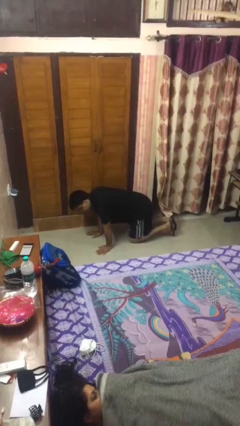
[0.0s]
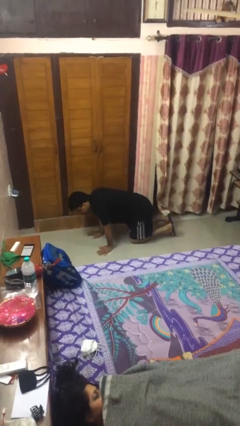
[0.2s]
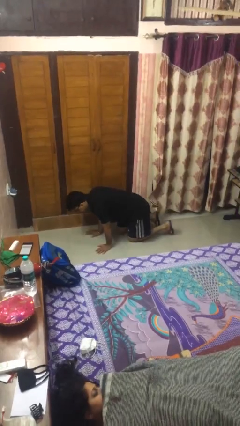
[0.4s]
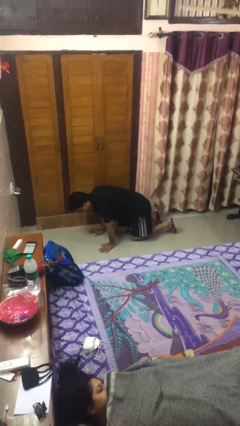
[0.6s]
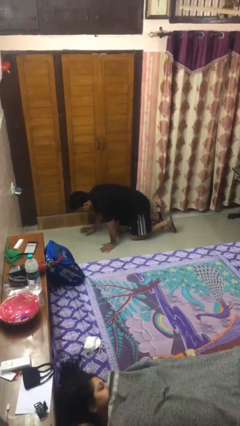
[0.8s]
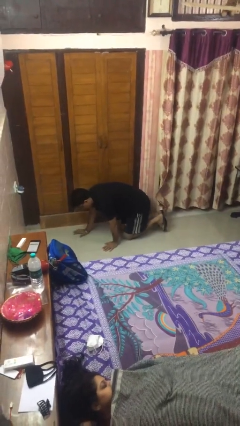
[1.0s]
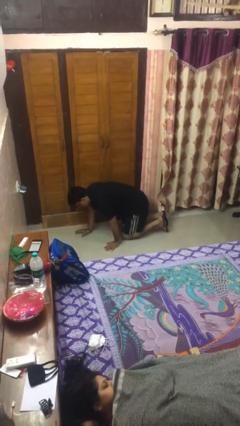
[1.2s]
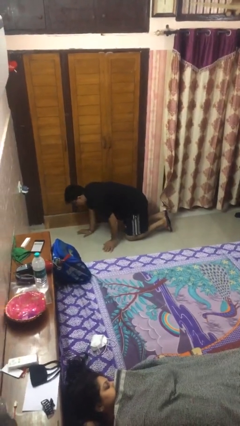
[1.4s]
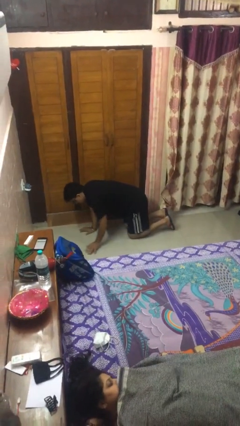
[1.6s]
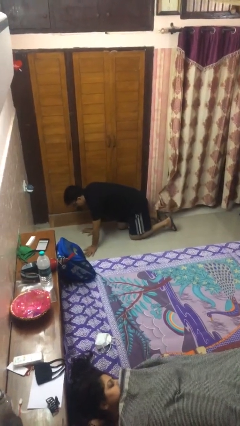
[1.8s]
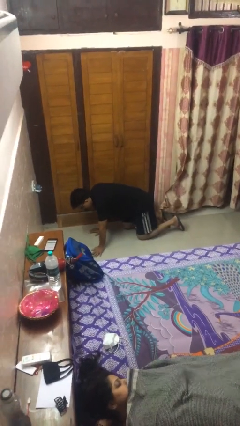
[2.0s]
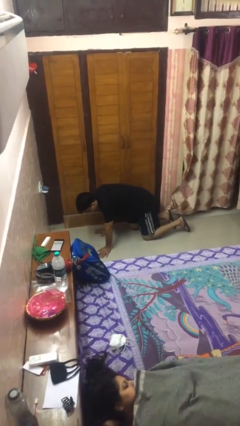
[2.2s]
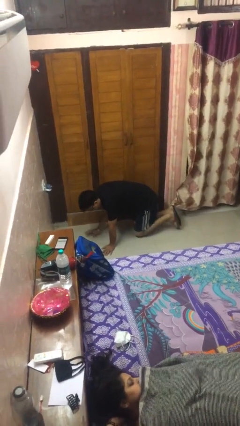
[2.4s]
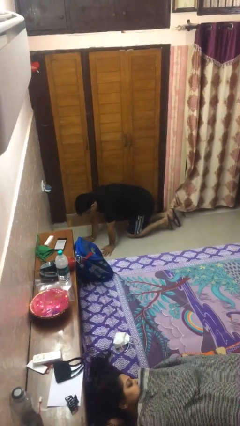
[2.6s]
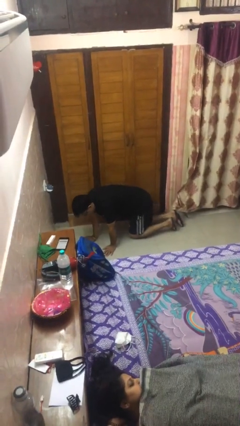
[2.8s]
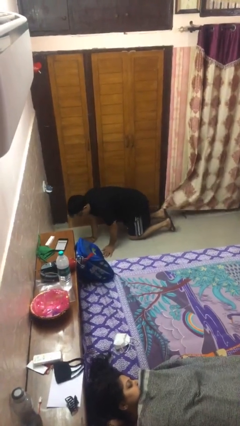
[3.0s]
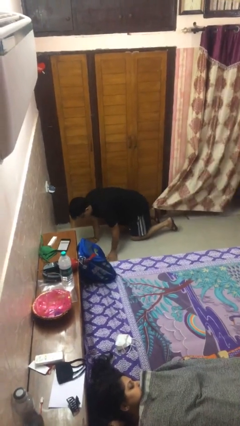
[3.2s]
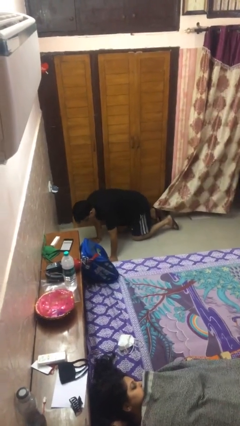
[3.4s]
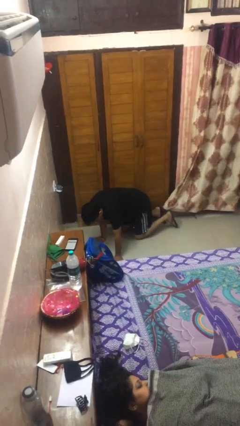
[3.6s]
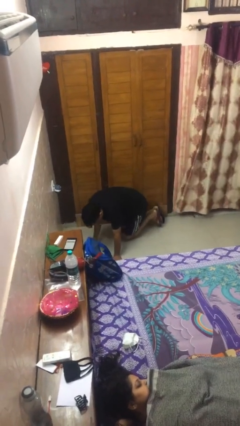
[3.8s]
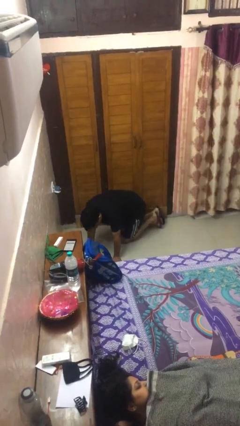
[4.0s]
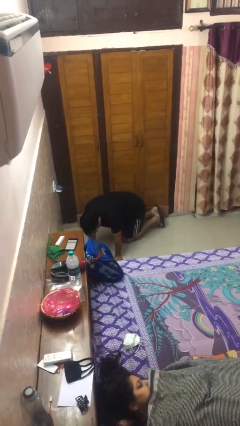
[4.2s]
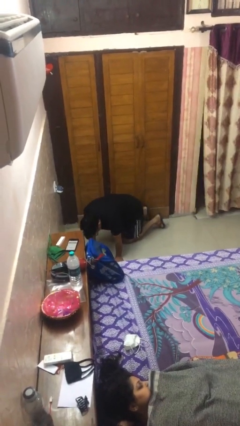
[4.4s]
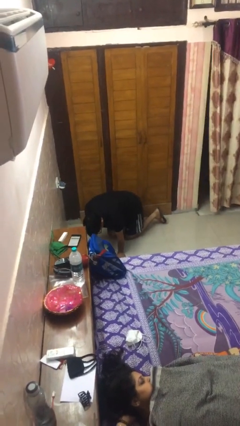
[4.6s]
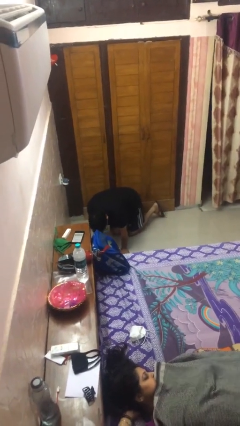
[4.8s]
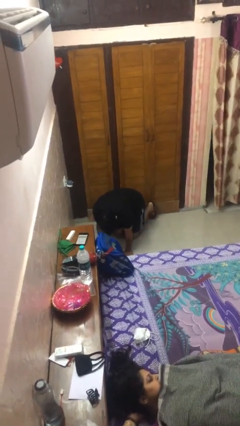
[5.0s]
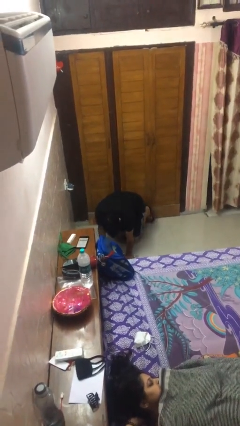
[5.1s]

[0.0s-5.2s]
person crawls

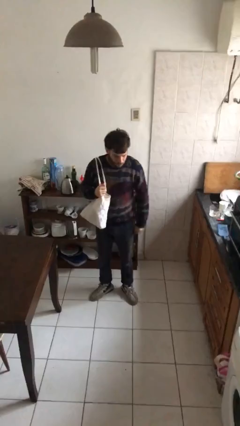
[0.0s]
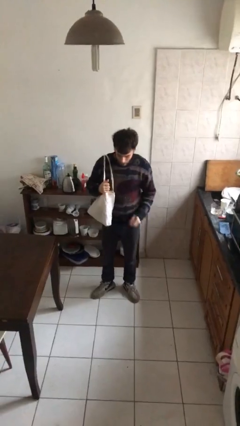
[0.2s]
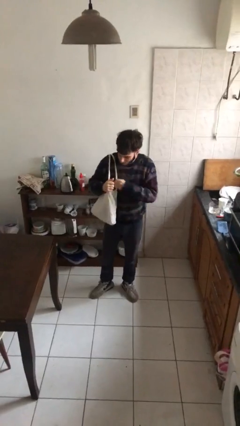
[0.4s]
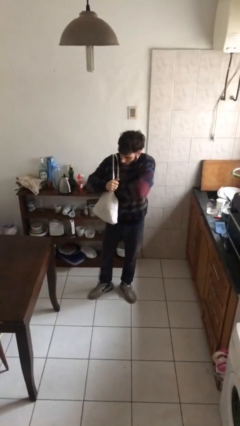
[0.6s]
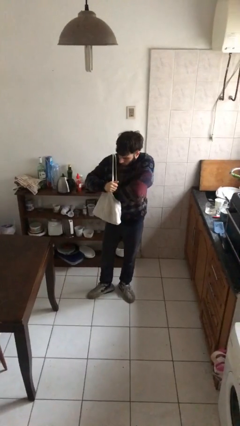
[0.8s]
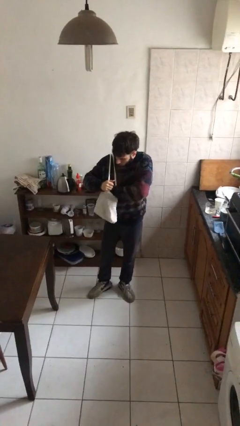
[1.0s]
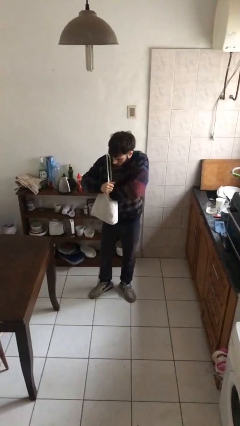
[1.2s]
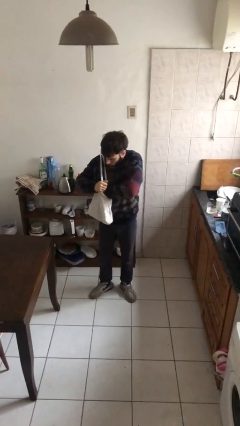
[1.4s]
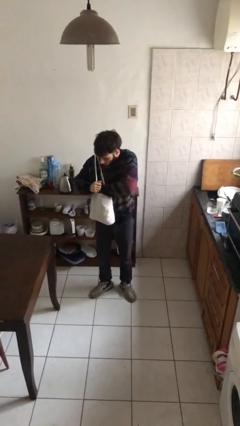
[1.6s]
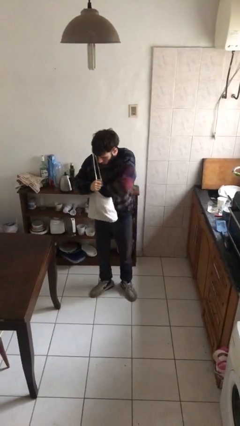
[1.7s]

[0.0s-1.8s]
person searches in purse

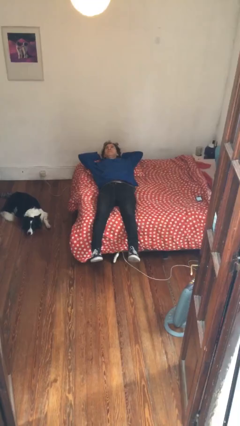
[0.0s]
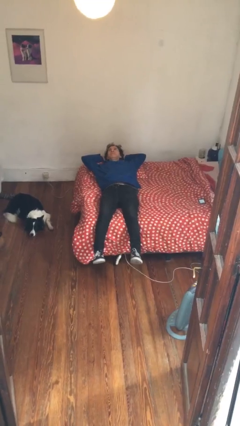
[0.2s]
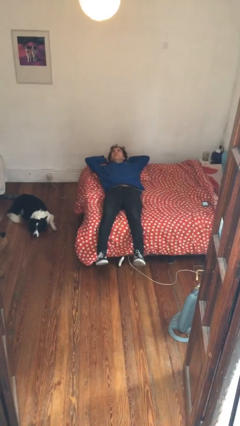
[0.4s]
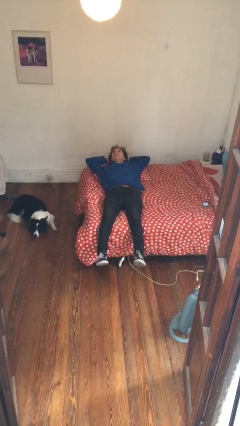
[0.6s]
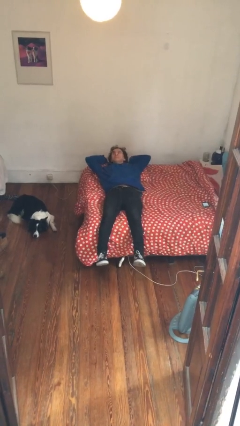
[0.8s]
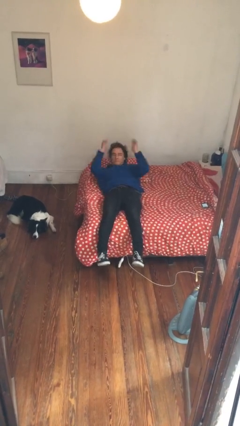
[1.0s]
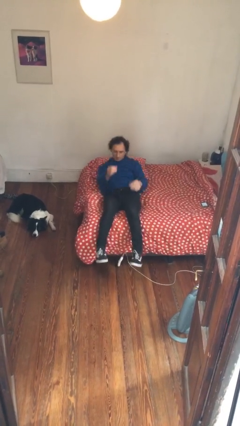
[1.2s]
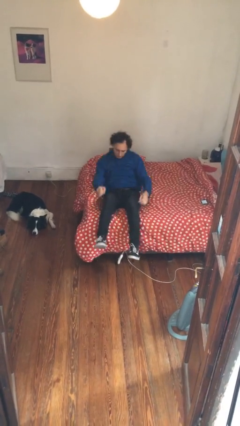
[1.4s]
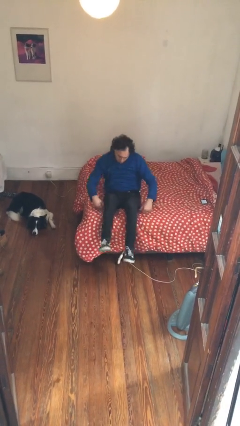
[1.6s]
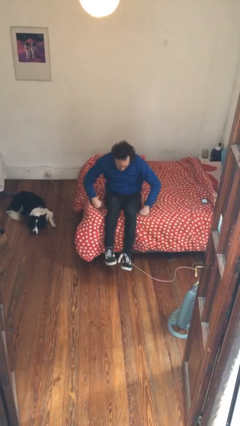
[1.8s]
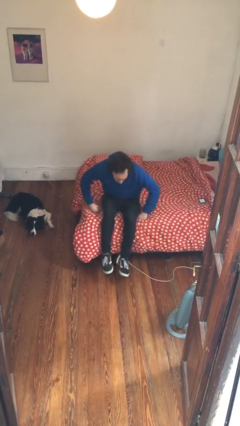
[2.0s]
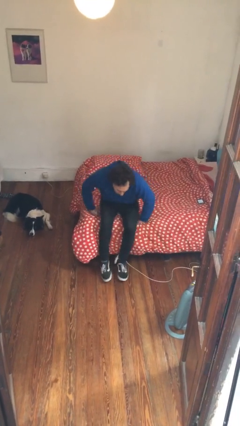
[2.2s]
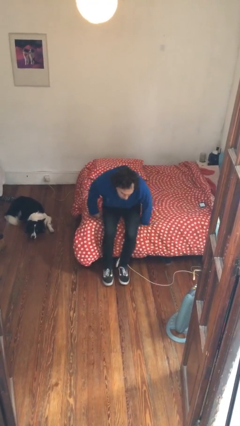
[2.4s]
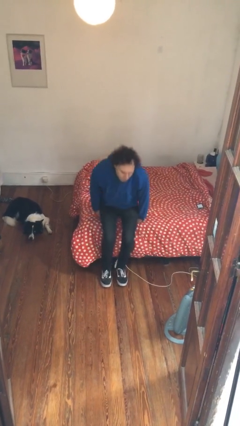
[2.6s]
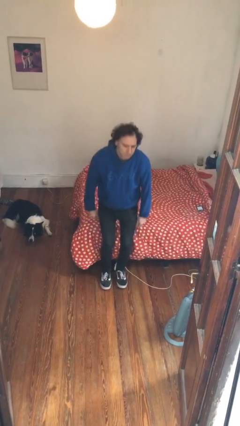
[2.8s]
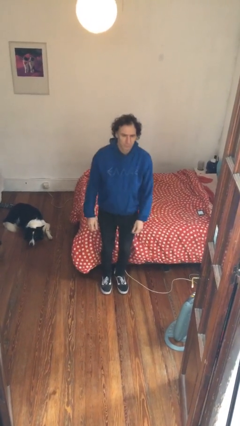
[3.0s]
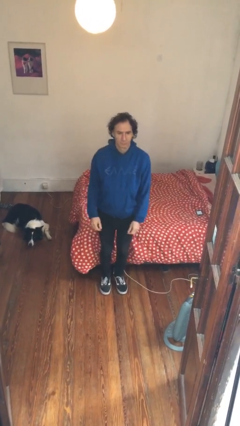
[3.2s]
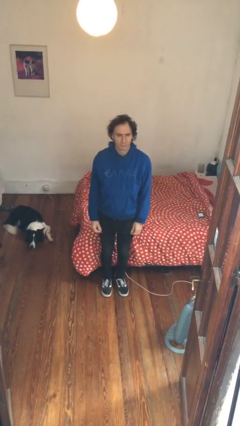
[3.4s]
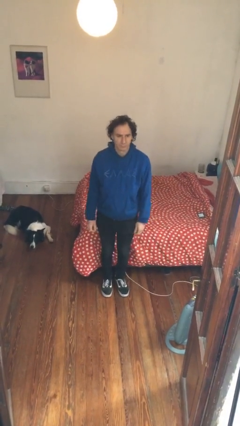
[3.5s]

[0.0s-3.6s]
person stands up

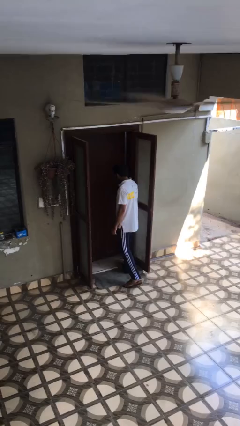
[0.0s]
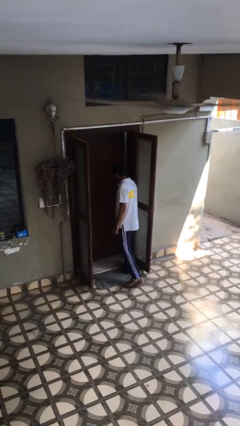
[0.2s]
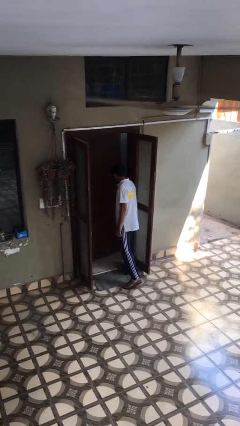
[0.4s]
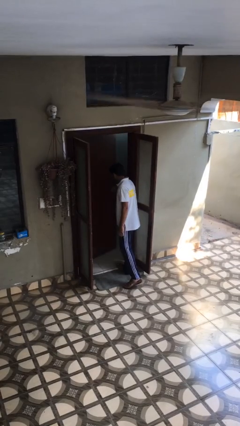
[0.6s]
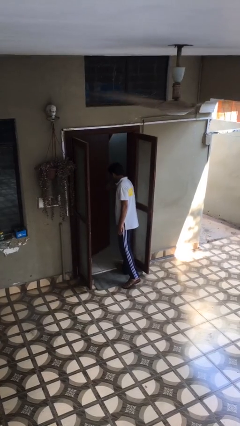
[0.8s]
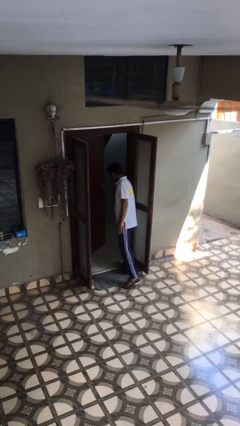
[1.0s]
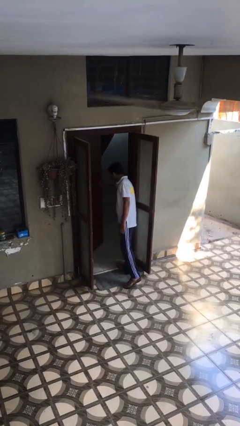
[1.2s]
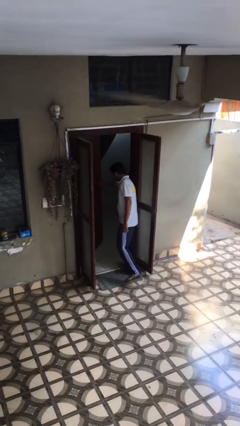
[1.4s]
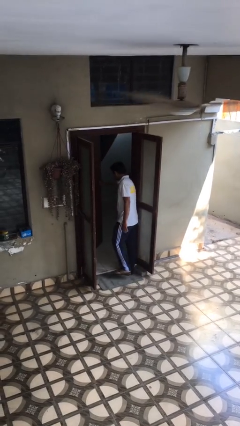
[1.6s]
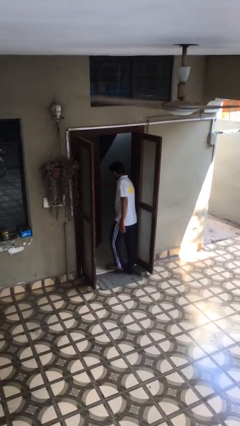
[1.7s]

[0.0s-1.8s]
person opens facility door

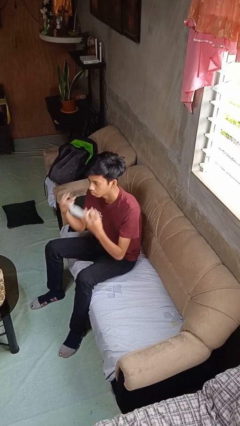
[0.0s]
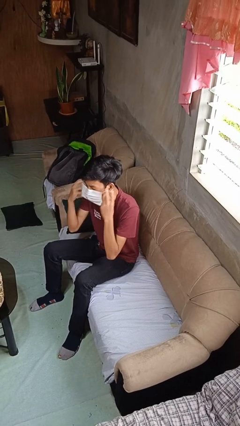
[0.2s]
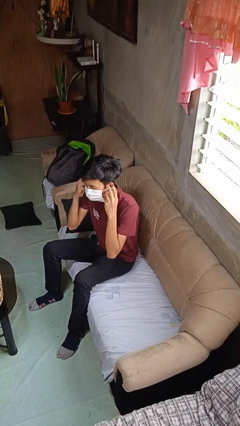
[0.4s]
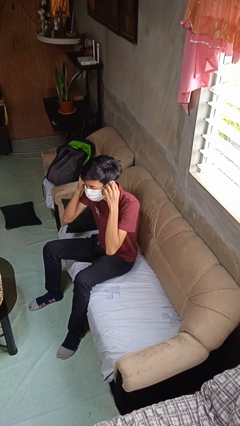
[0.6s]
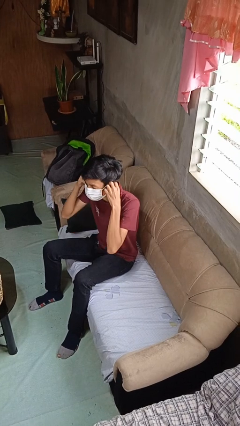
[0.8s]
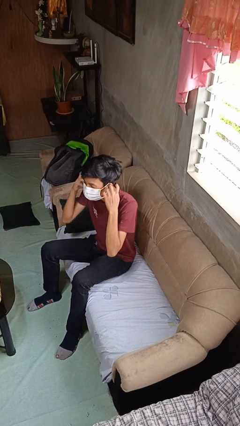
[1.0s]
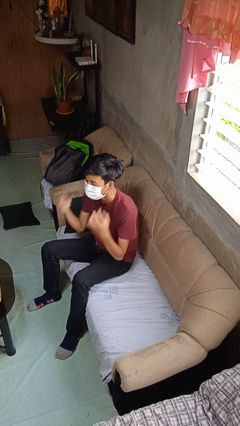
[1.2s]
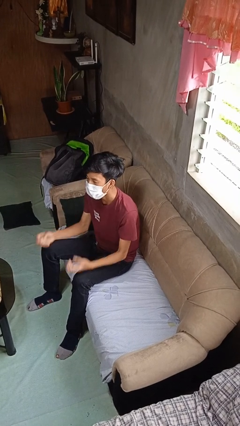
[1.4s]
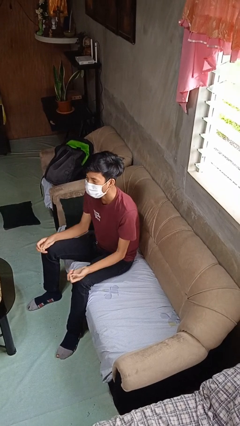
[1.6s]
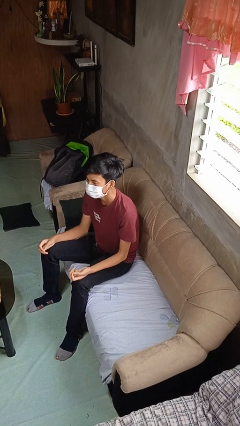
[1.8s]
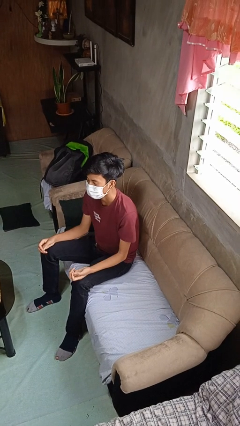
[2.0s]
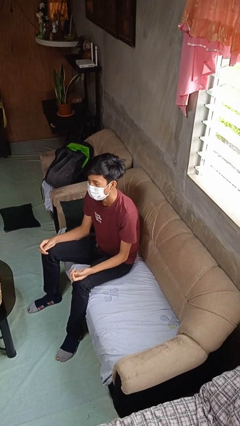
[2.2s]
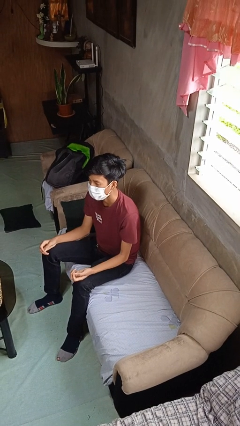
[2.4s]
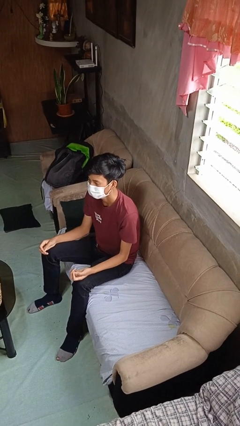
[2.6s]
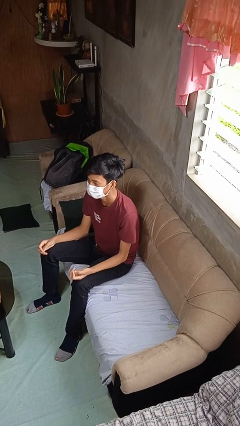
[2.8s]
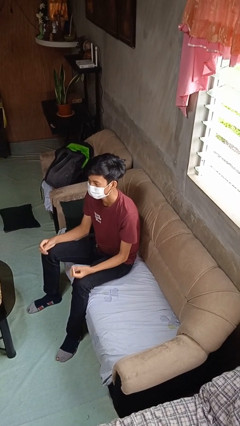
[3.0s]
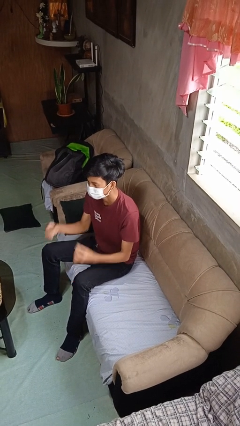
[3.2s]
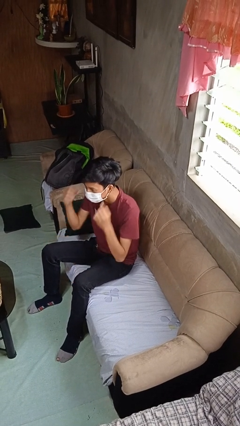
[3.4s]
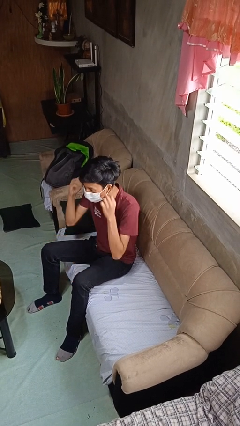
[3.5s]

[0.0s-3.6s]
person puts on facemask

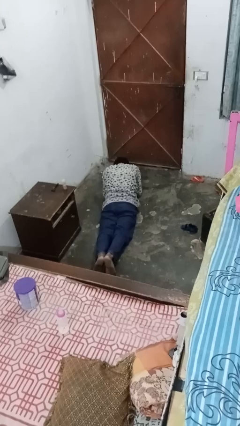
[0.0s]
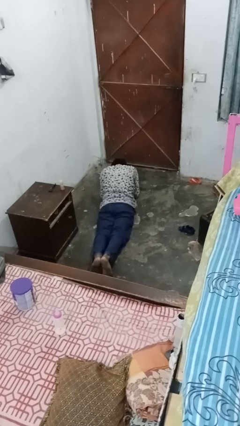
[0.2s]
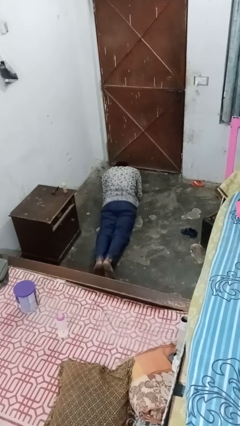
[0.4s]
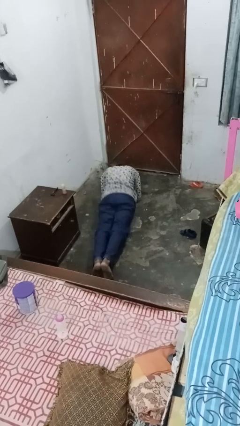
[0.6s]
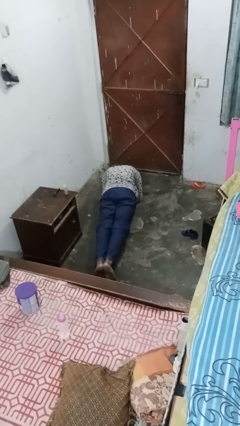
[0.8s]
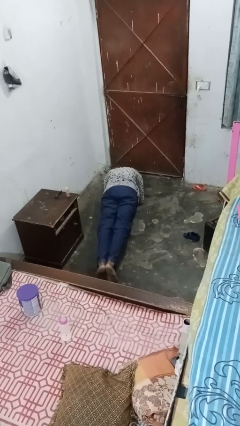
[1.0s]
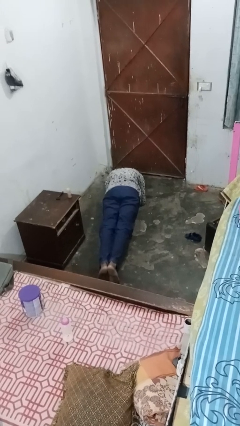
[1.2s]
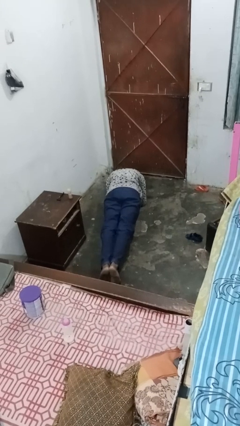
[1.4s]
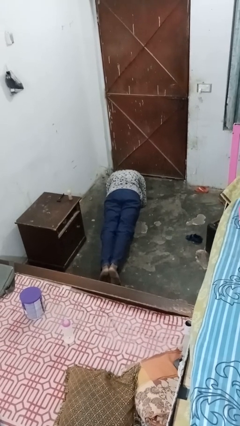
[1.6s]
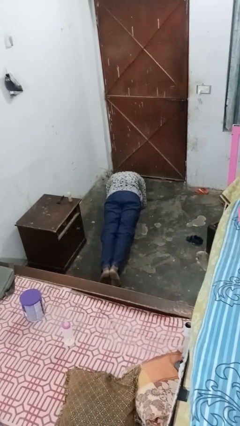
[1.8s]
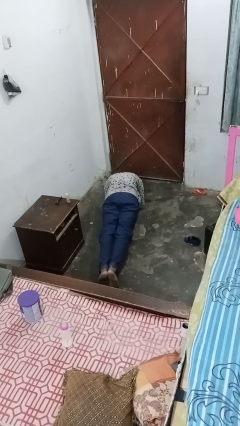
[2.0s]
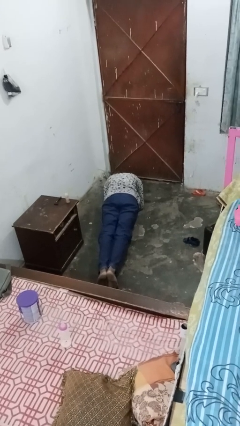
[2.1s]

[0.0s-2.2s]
person exercises with plank
